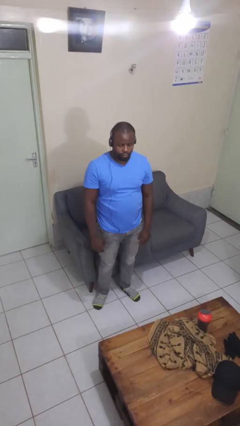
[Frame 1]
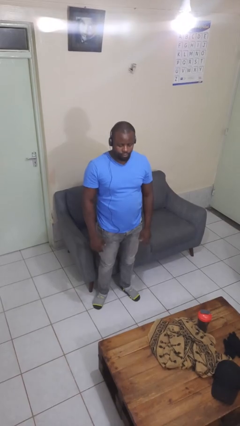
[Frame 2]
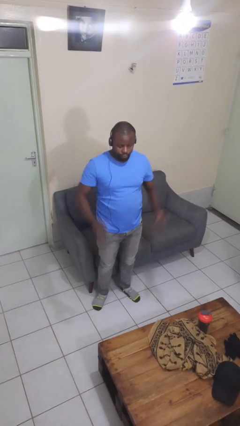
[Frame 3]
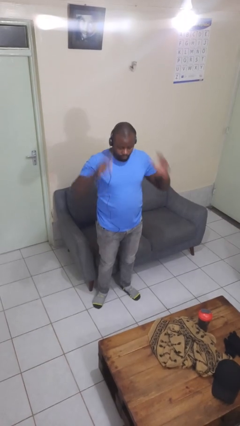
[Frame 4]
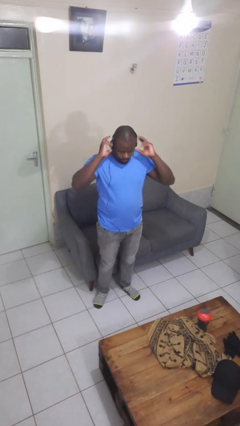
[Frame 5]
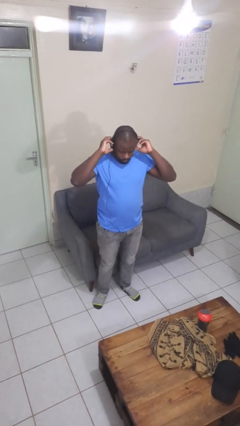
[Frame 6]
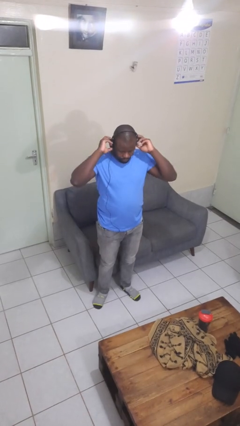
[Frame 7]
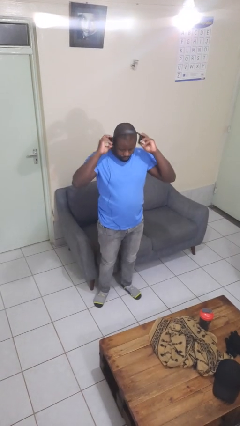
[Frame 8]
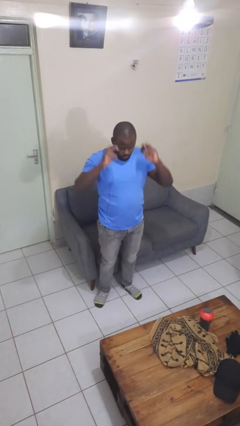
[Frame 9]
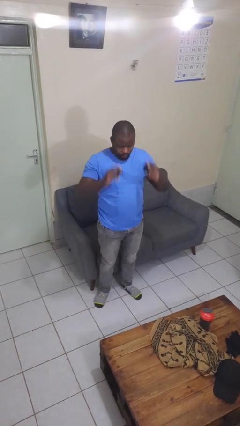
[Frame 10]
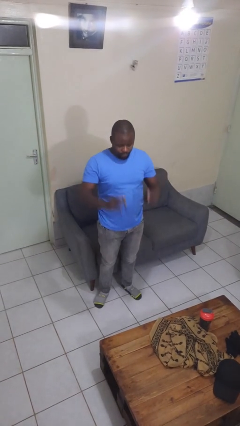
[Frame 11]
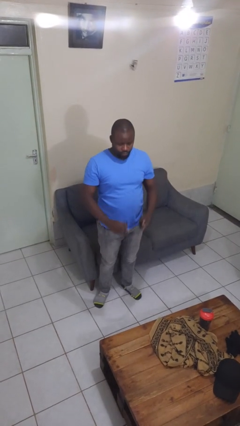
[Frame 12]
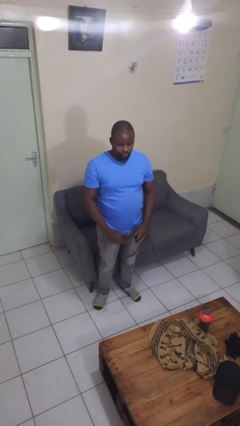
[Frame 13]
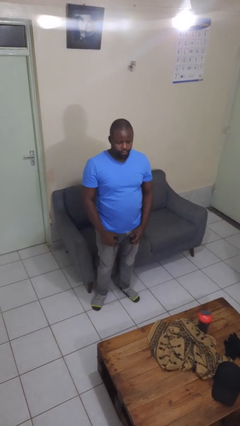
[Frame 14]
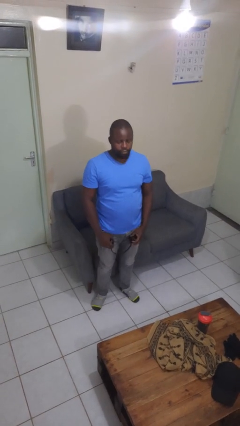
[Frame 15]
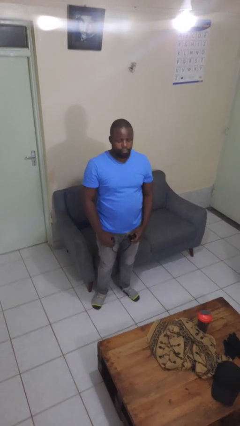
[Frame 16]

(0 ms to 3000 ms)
person takes off headphones

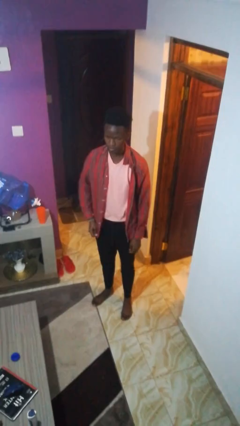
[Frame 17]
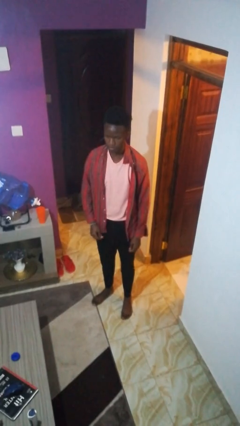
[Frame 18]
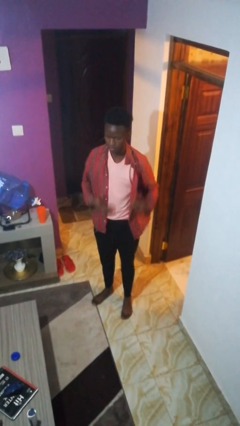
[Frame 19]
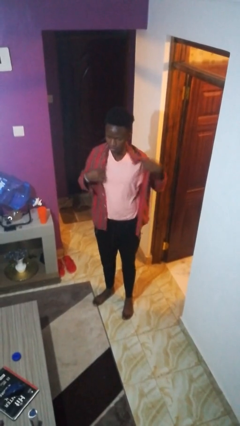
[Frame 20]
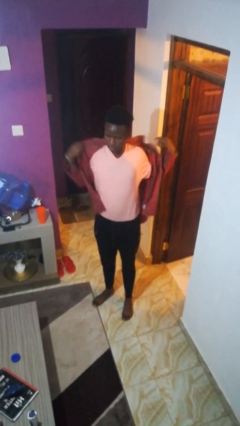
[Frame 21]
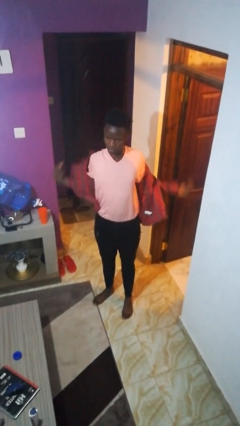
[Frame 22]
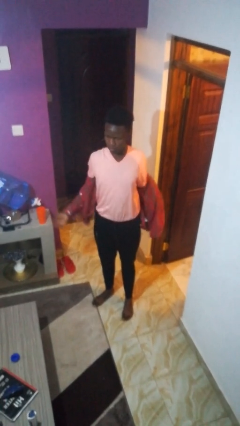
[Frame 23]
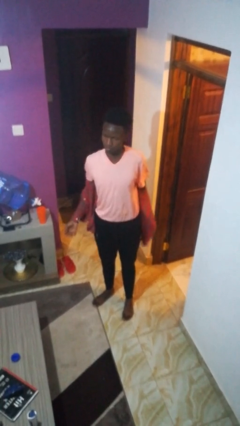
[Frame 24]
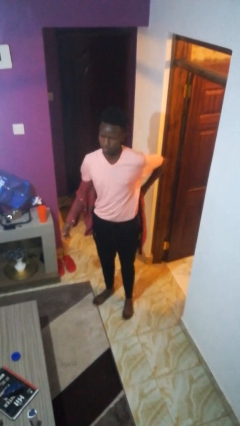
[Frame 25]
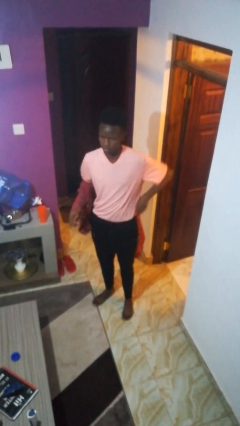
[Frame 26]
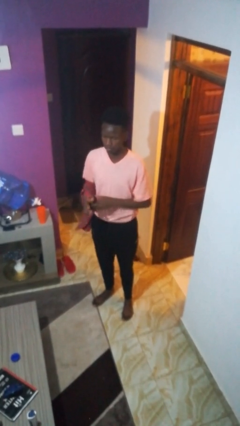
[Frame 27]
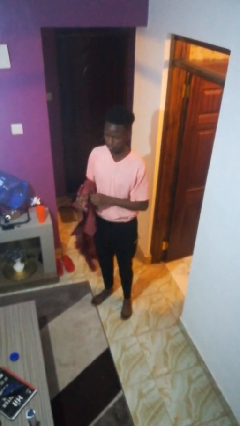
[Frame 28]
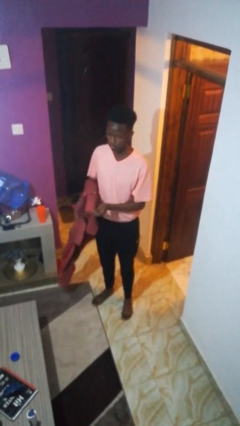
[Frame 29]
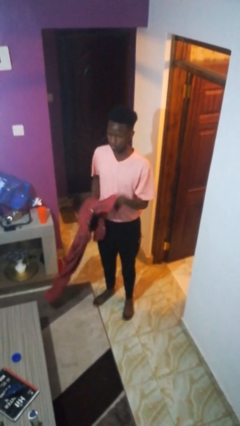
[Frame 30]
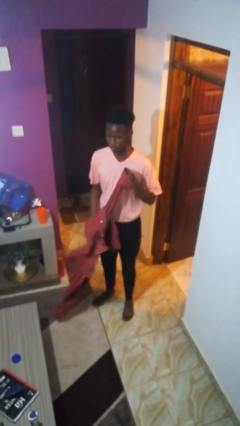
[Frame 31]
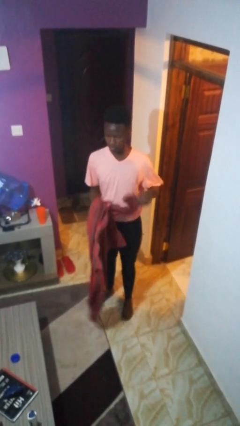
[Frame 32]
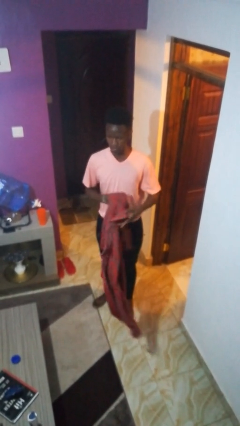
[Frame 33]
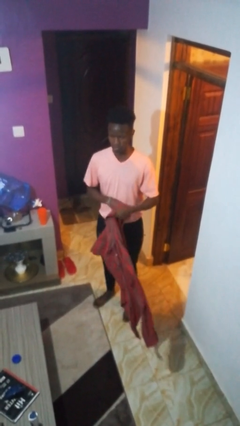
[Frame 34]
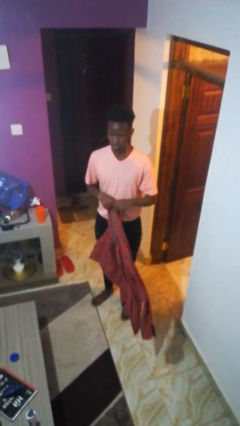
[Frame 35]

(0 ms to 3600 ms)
person takes off shirt

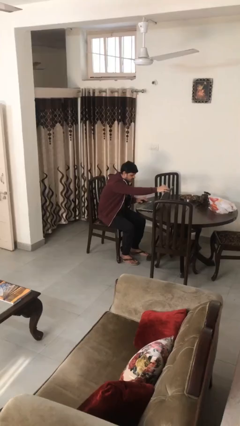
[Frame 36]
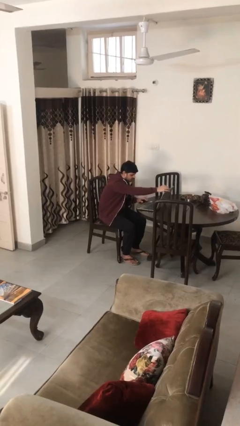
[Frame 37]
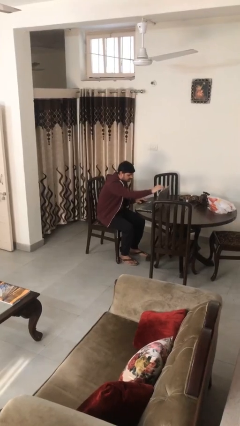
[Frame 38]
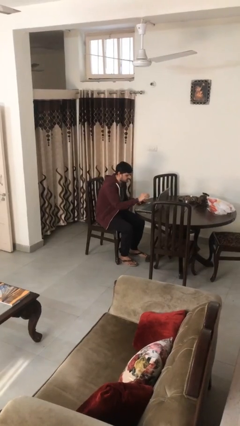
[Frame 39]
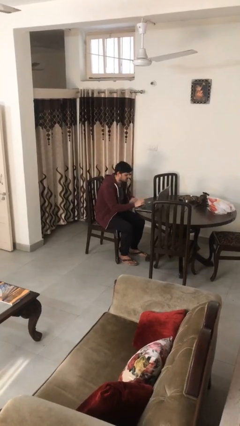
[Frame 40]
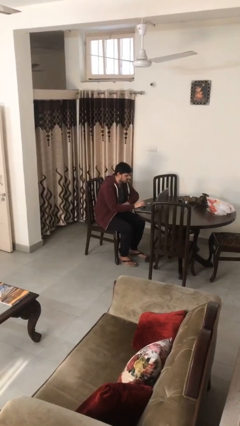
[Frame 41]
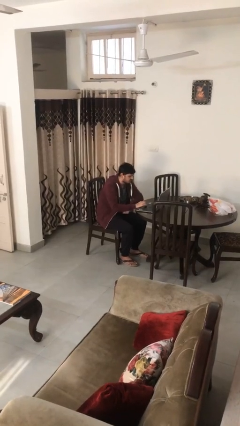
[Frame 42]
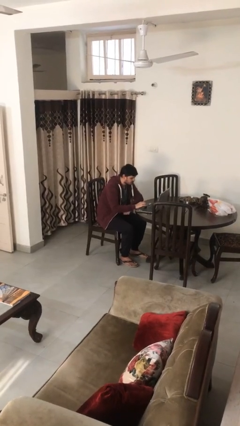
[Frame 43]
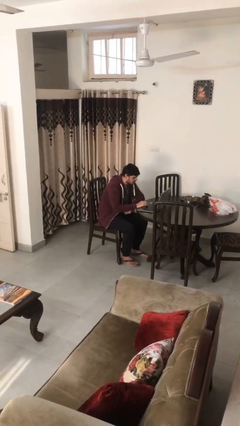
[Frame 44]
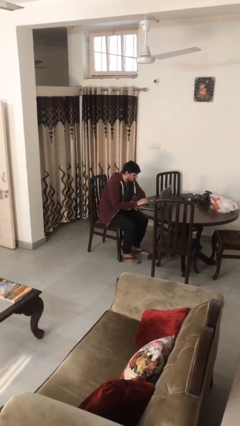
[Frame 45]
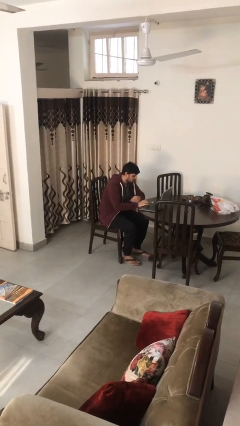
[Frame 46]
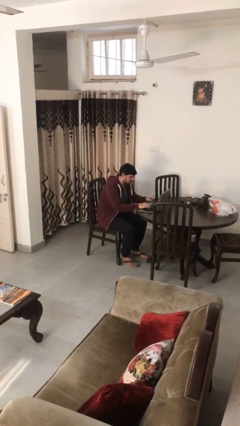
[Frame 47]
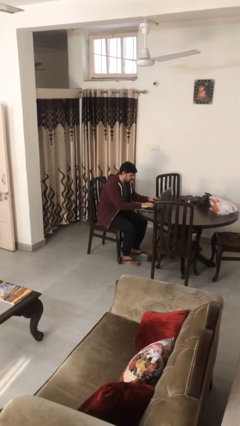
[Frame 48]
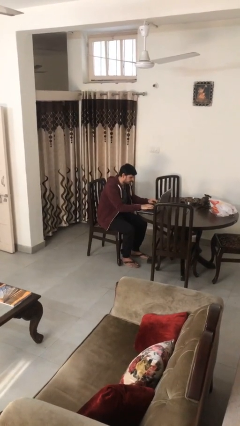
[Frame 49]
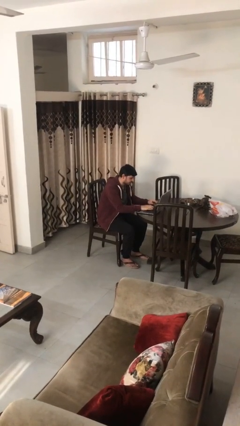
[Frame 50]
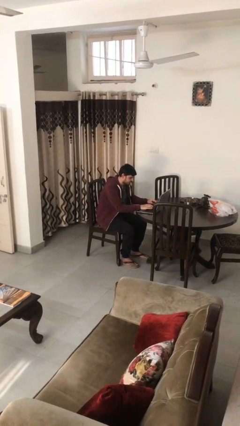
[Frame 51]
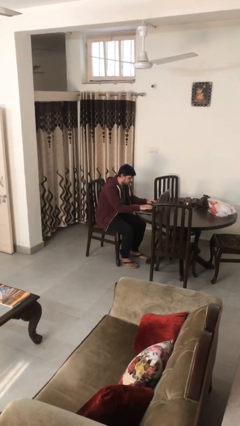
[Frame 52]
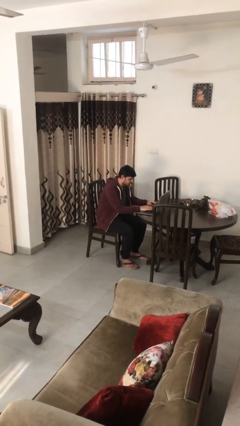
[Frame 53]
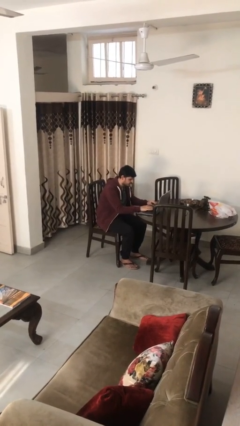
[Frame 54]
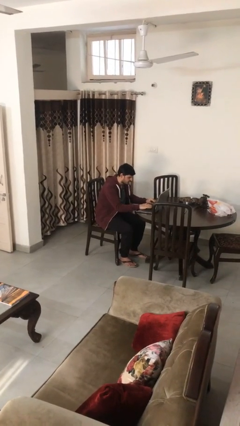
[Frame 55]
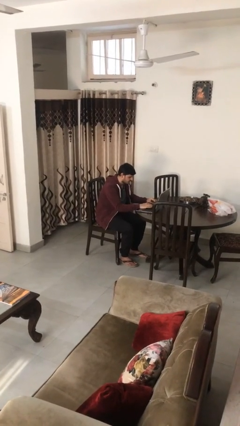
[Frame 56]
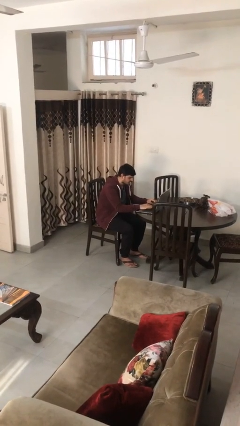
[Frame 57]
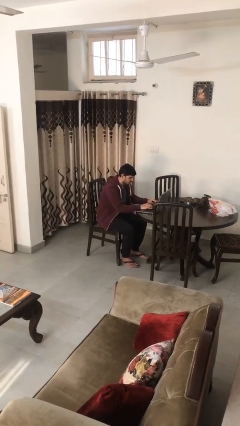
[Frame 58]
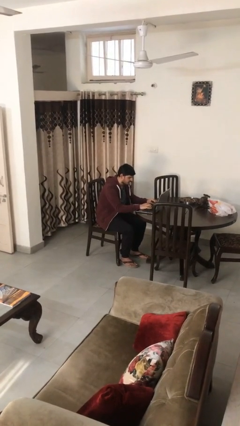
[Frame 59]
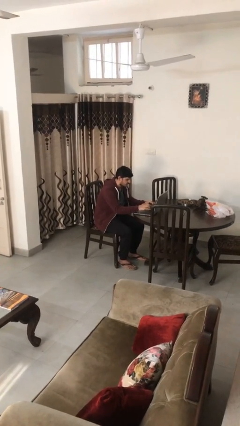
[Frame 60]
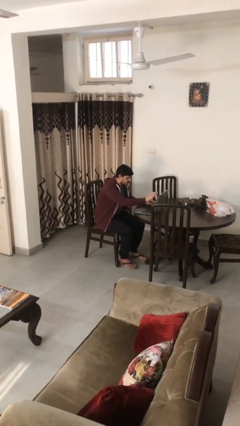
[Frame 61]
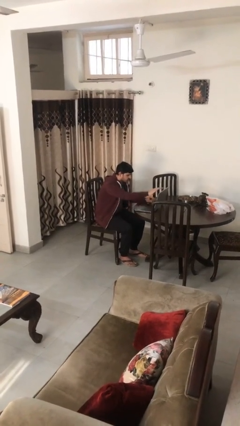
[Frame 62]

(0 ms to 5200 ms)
person interacts with laptop

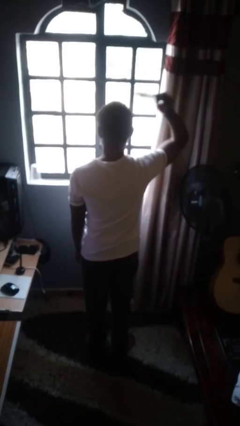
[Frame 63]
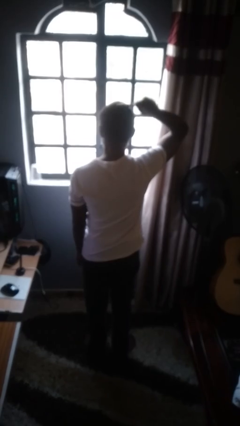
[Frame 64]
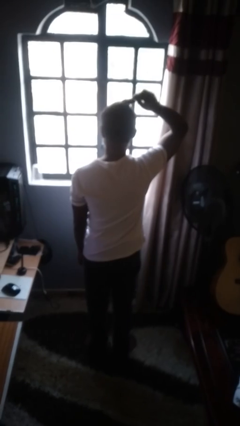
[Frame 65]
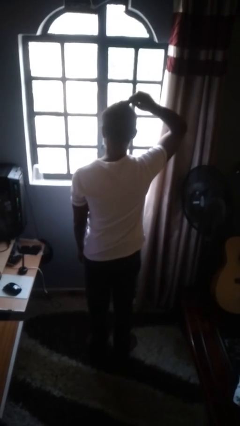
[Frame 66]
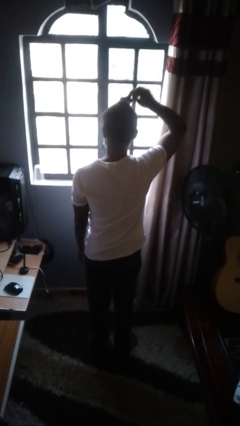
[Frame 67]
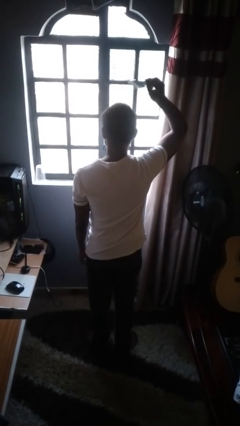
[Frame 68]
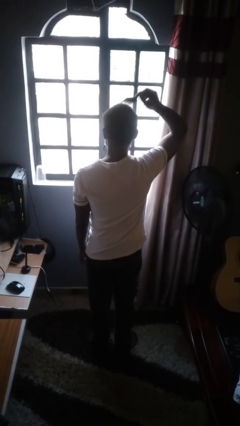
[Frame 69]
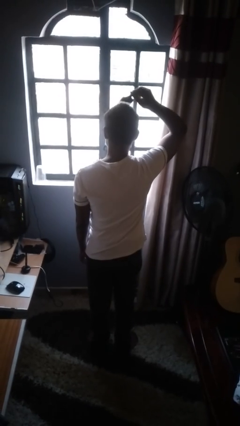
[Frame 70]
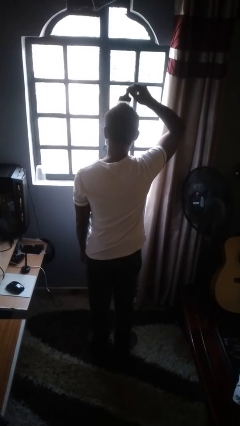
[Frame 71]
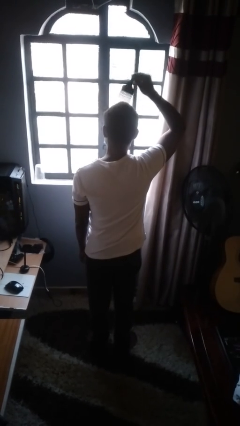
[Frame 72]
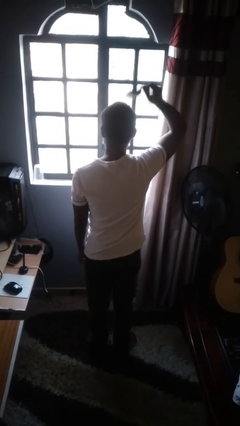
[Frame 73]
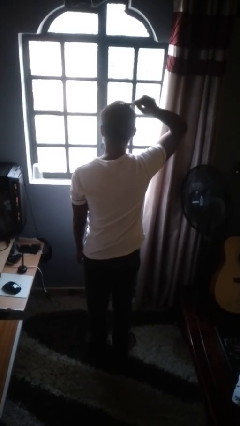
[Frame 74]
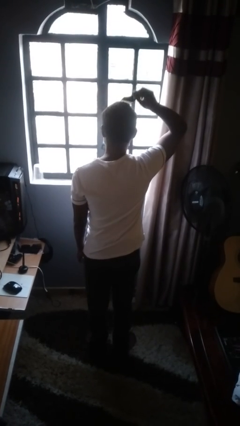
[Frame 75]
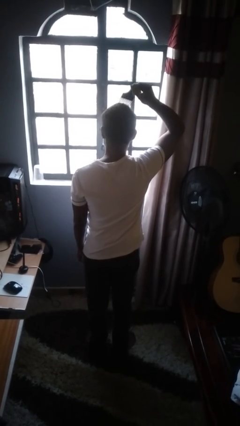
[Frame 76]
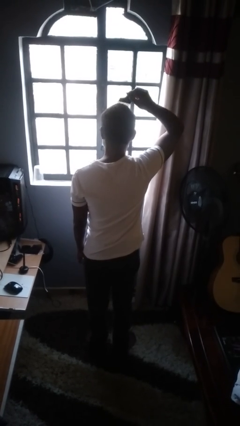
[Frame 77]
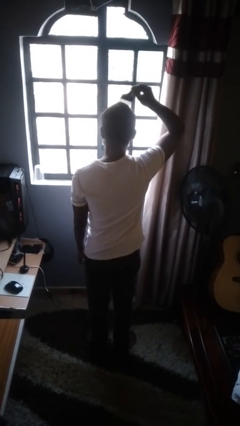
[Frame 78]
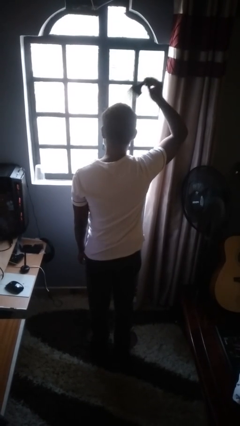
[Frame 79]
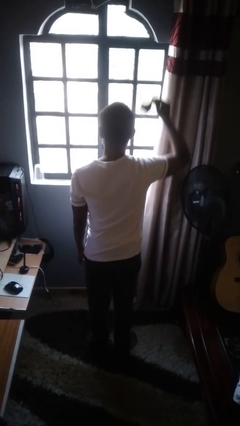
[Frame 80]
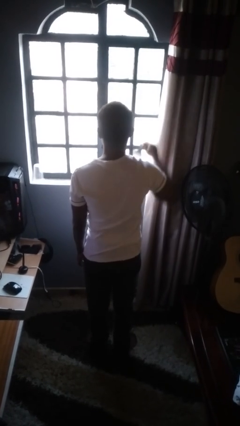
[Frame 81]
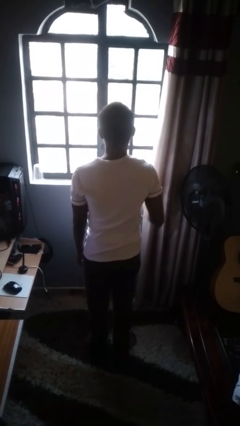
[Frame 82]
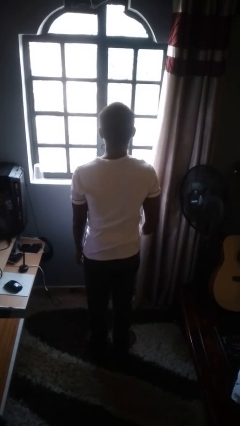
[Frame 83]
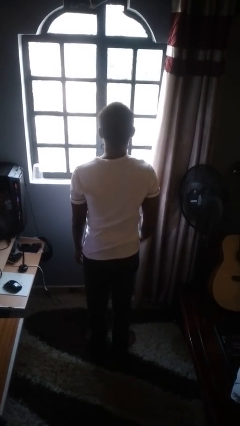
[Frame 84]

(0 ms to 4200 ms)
person brushes hair

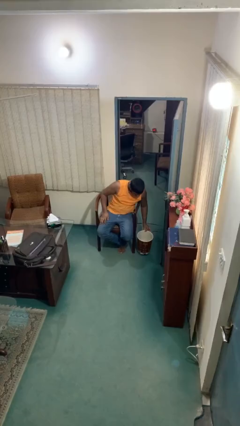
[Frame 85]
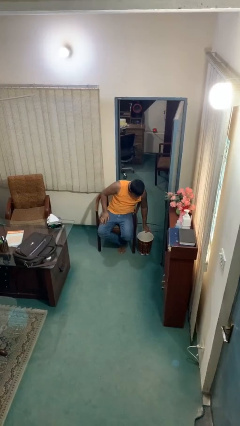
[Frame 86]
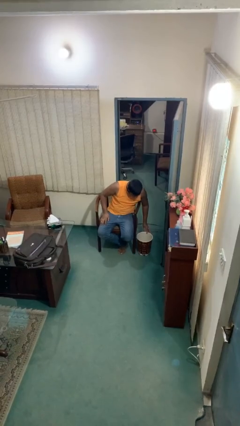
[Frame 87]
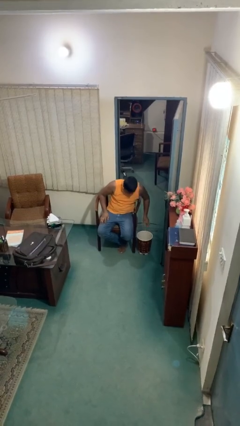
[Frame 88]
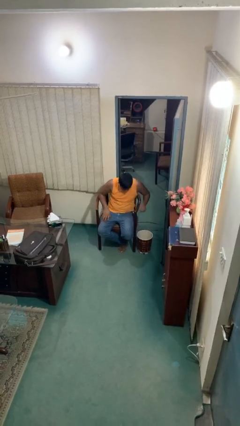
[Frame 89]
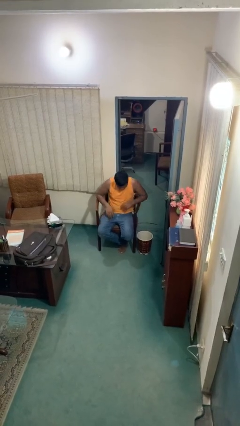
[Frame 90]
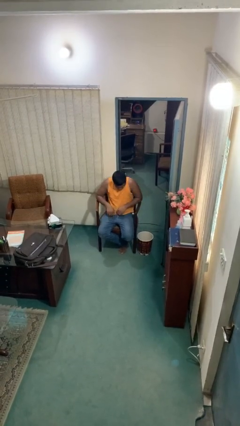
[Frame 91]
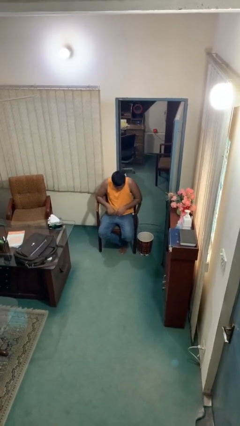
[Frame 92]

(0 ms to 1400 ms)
person puts down object on floor
